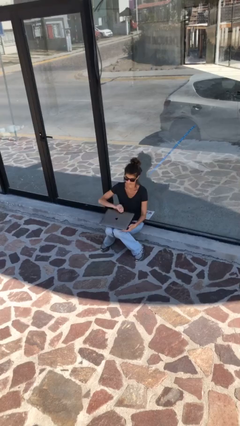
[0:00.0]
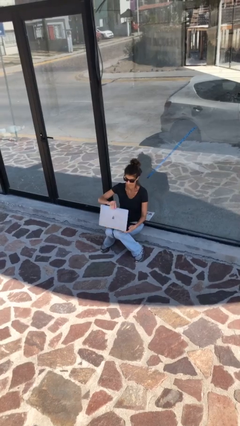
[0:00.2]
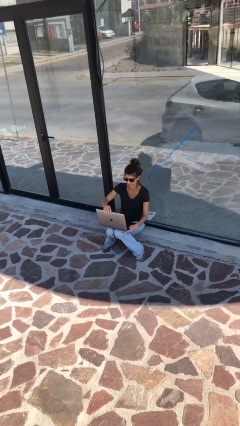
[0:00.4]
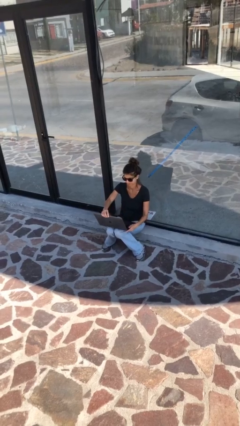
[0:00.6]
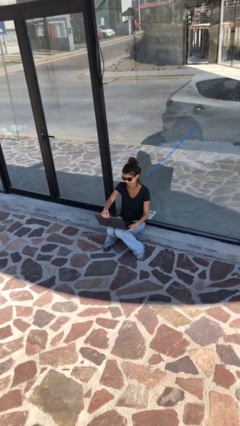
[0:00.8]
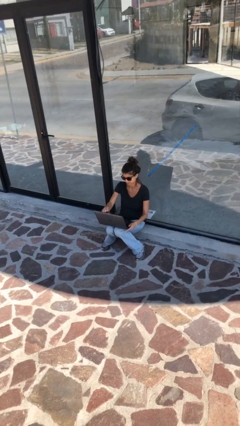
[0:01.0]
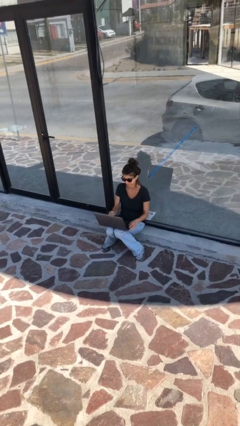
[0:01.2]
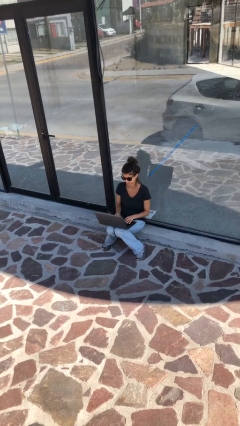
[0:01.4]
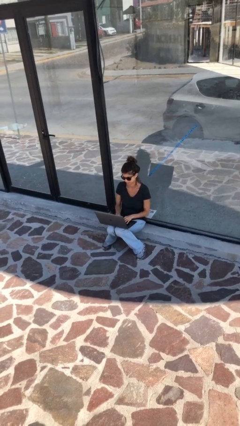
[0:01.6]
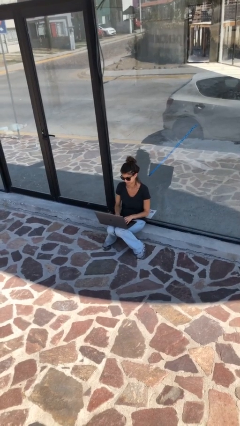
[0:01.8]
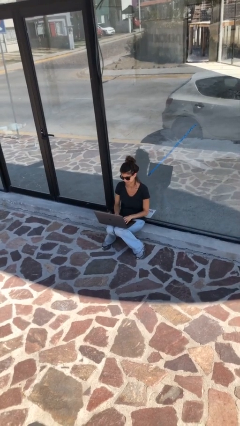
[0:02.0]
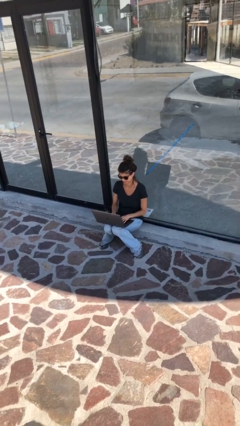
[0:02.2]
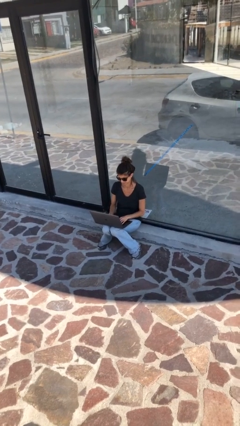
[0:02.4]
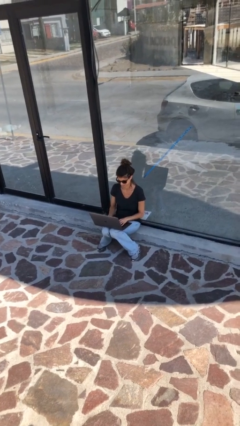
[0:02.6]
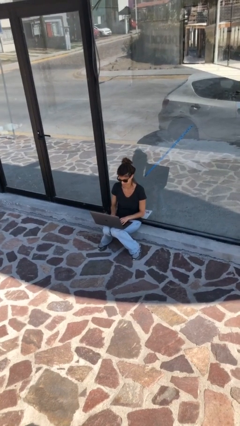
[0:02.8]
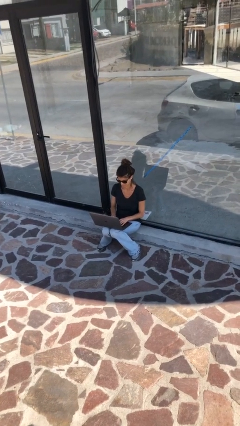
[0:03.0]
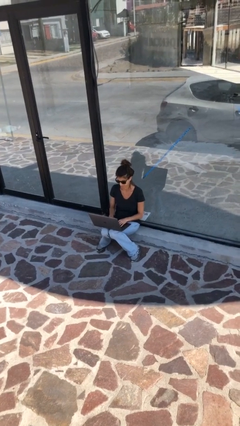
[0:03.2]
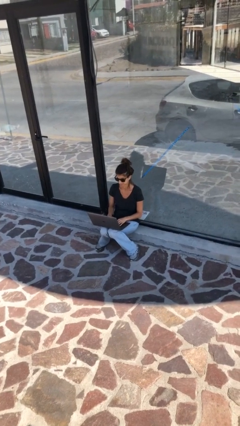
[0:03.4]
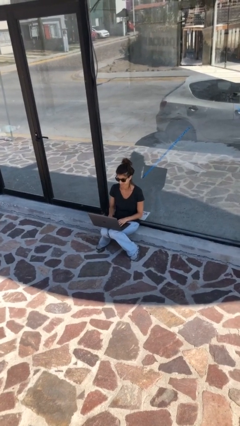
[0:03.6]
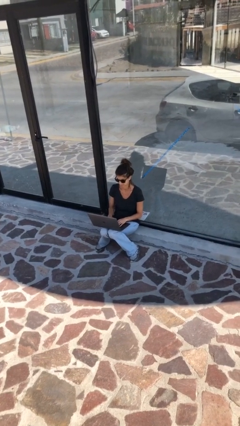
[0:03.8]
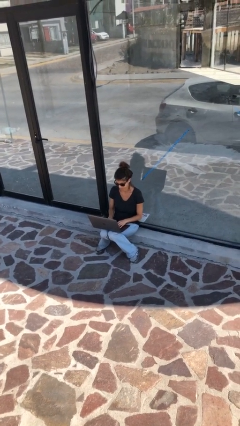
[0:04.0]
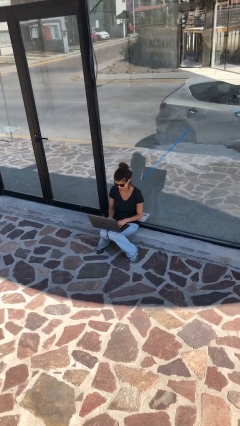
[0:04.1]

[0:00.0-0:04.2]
person interacts with laptop

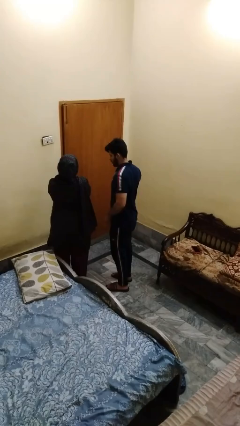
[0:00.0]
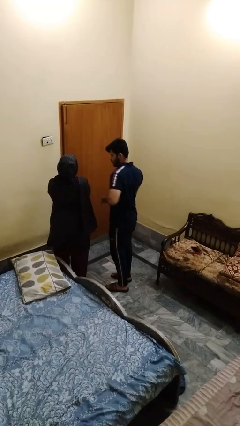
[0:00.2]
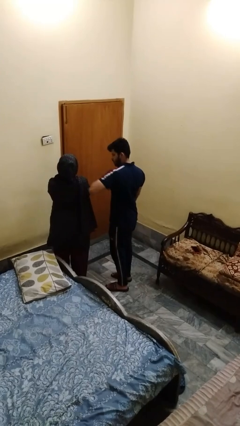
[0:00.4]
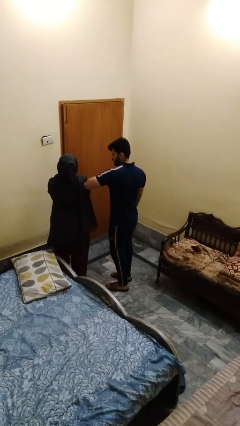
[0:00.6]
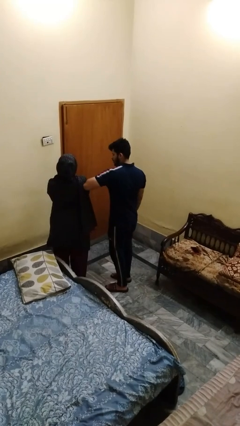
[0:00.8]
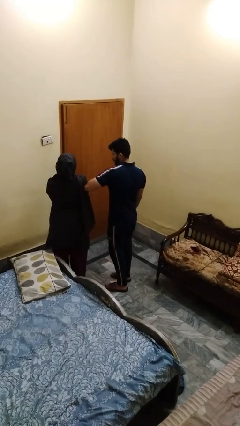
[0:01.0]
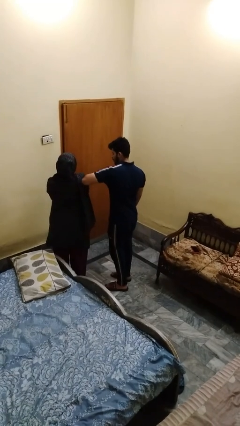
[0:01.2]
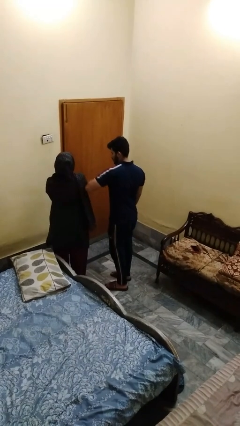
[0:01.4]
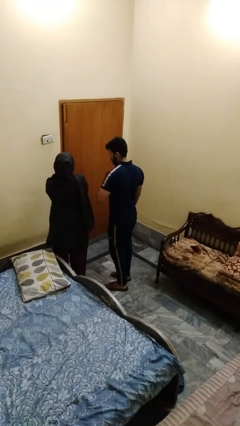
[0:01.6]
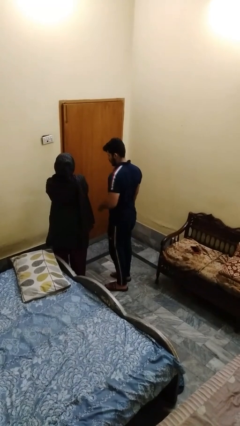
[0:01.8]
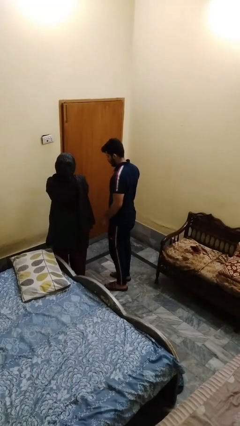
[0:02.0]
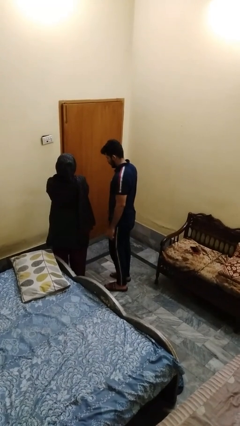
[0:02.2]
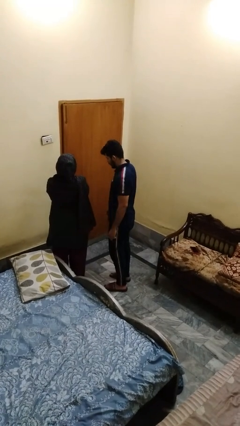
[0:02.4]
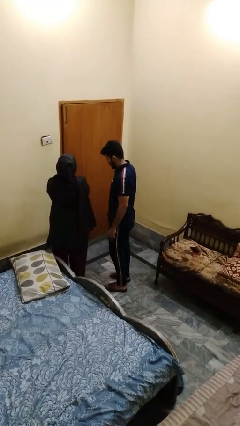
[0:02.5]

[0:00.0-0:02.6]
person nudges person with elbow

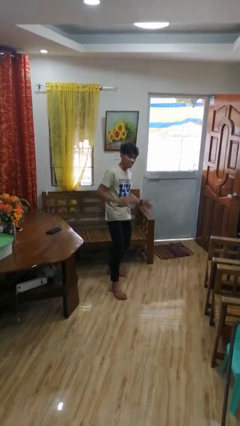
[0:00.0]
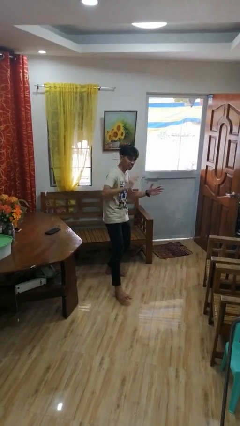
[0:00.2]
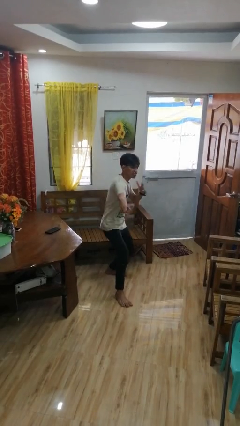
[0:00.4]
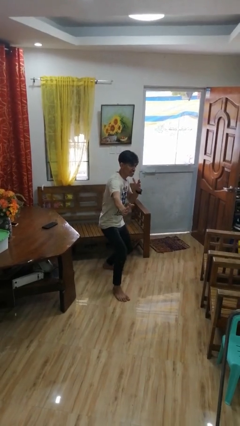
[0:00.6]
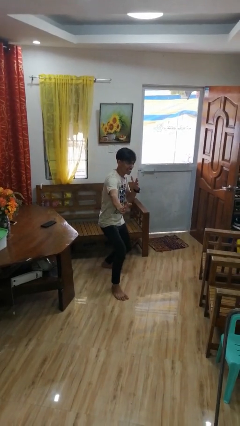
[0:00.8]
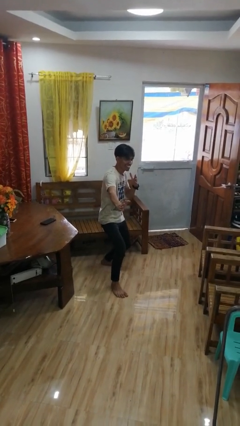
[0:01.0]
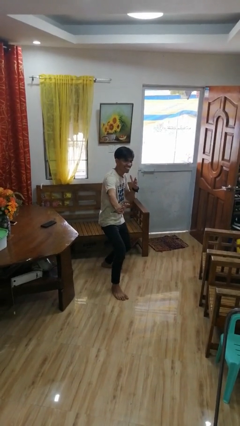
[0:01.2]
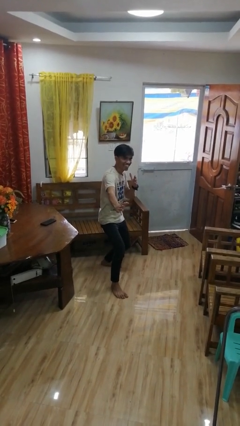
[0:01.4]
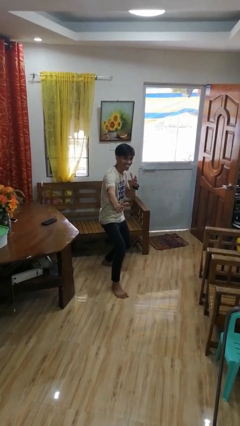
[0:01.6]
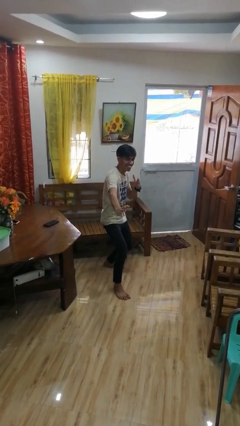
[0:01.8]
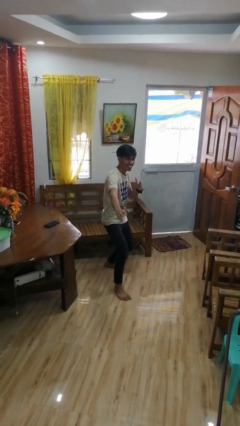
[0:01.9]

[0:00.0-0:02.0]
person karate chop

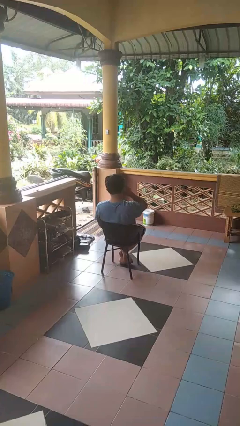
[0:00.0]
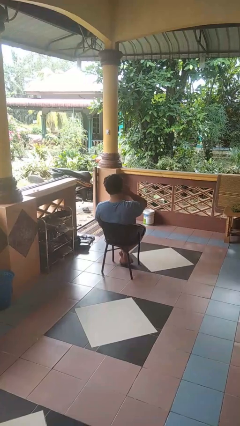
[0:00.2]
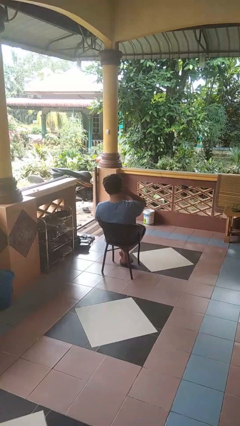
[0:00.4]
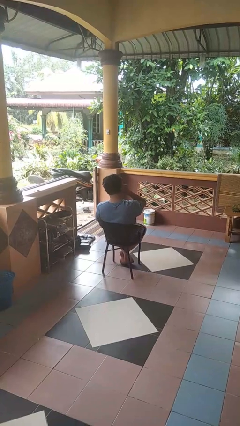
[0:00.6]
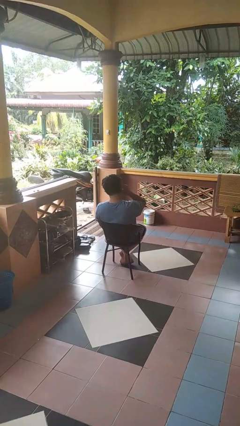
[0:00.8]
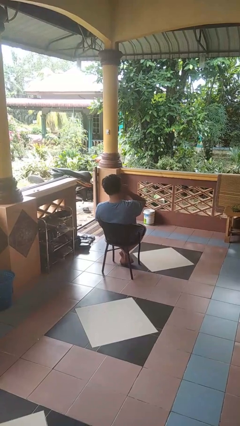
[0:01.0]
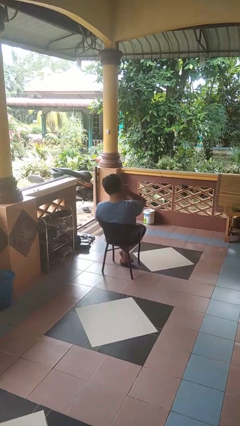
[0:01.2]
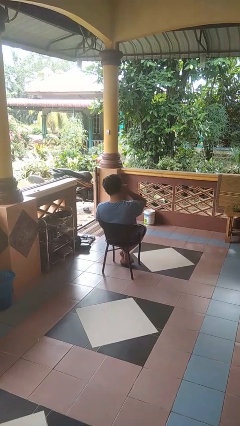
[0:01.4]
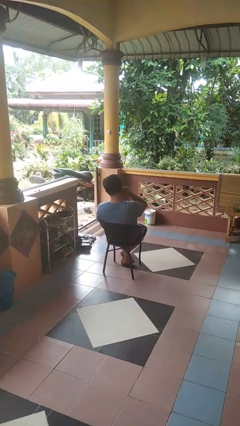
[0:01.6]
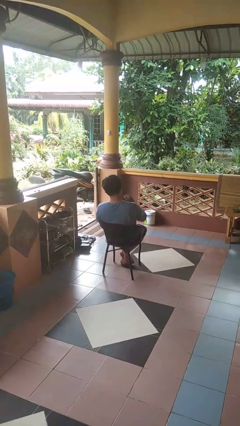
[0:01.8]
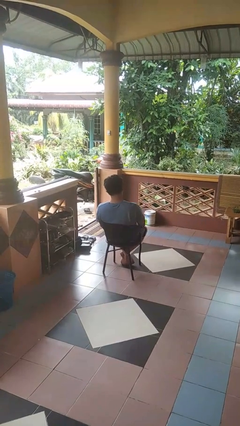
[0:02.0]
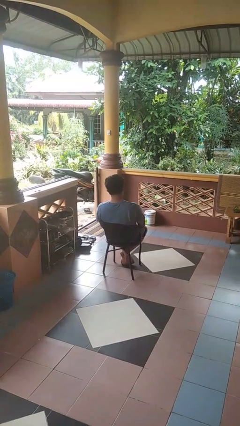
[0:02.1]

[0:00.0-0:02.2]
person touches earlobe

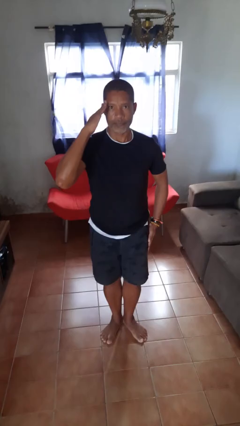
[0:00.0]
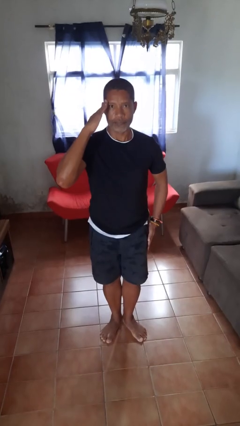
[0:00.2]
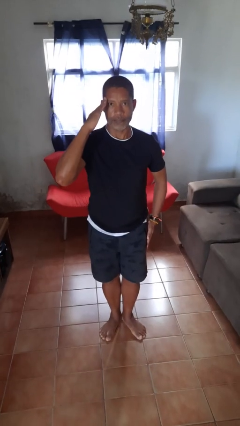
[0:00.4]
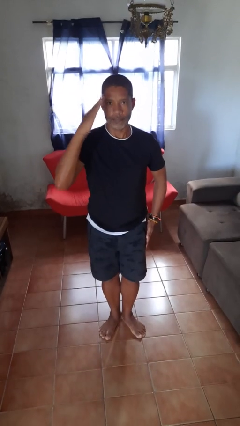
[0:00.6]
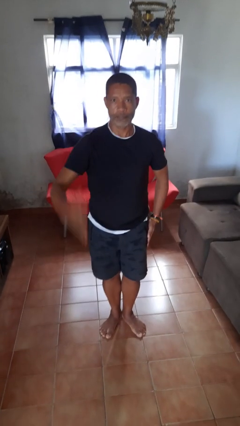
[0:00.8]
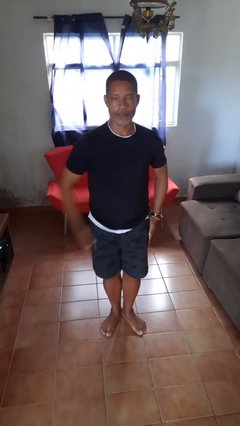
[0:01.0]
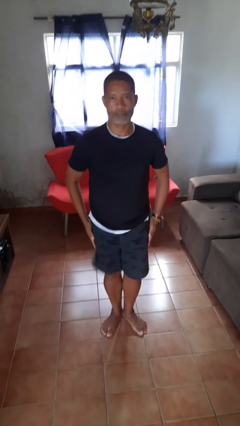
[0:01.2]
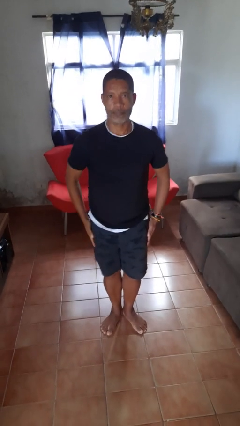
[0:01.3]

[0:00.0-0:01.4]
person salutes

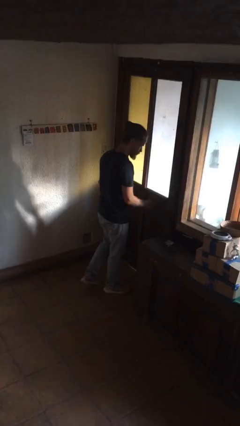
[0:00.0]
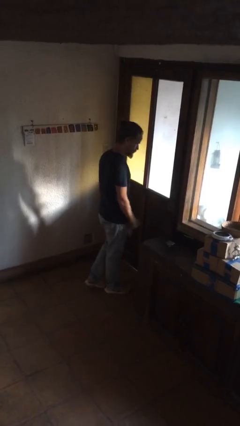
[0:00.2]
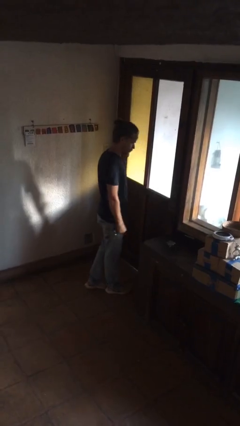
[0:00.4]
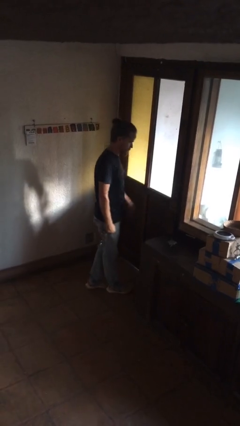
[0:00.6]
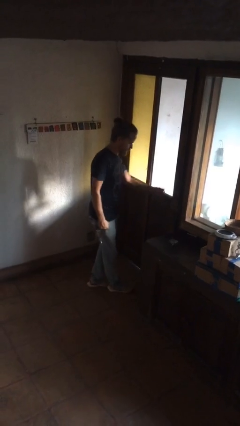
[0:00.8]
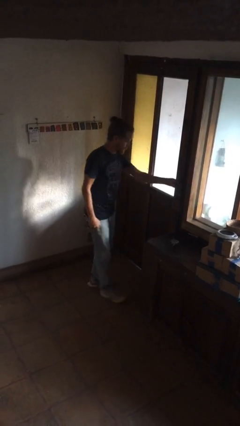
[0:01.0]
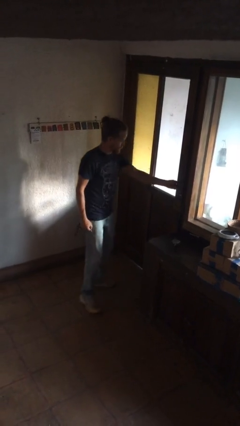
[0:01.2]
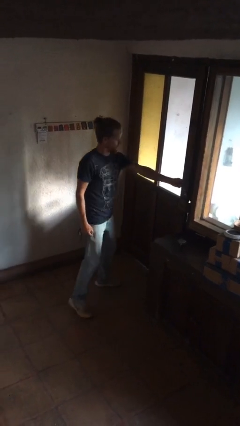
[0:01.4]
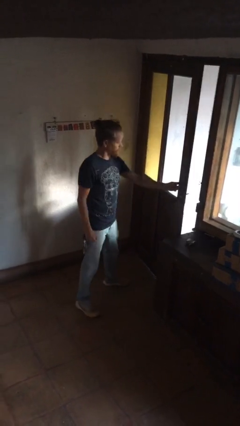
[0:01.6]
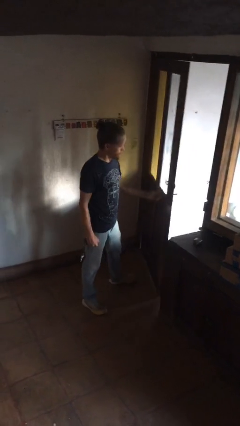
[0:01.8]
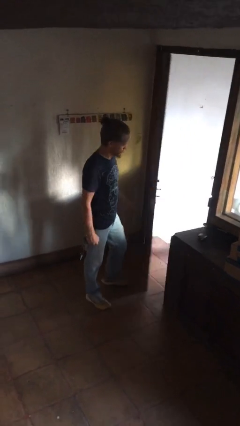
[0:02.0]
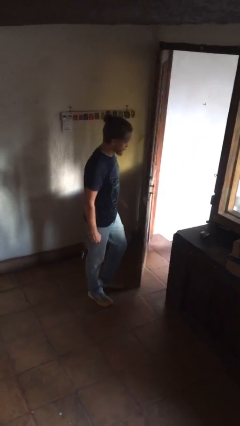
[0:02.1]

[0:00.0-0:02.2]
person opens facility door

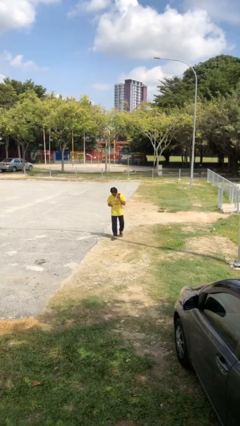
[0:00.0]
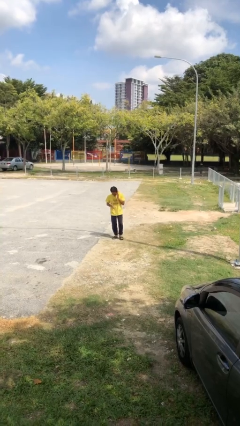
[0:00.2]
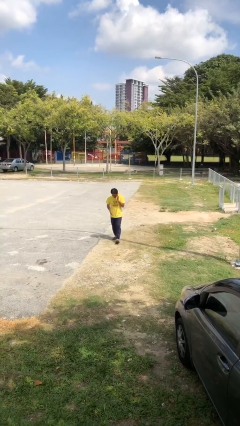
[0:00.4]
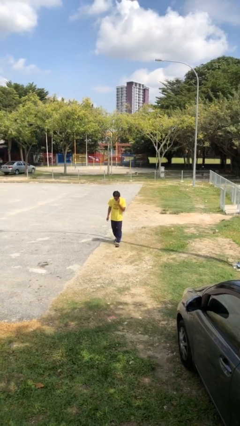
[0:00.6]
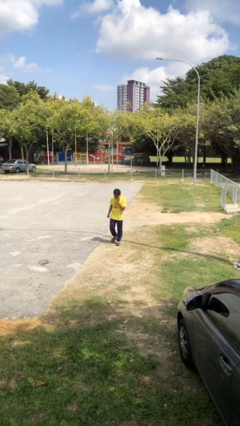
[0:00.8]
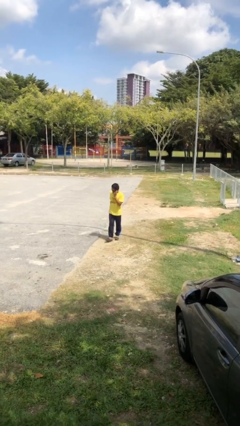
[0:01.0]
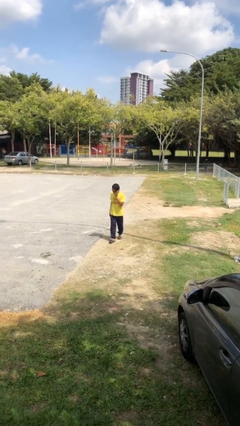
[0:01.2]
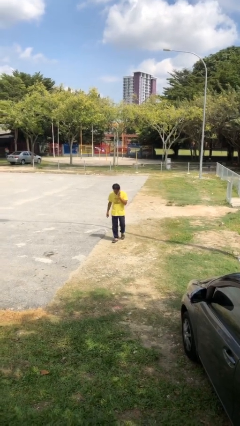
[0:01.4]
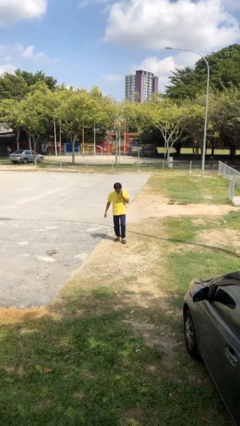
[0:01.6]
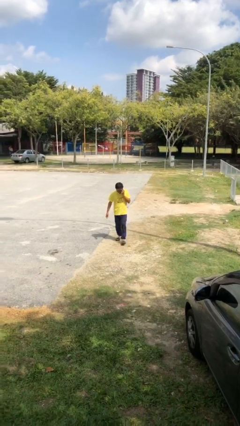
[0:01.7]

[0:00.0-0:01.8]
person talks on phone

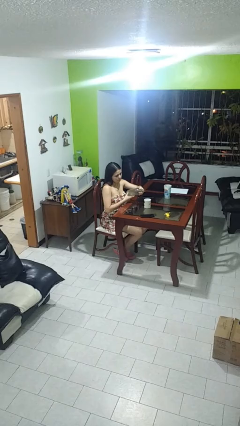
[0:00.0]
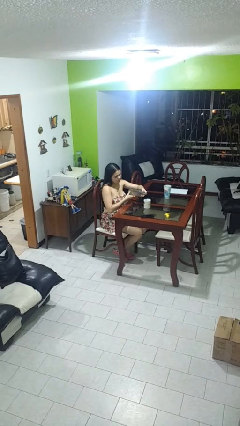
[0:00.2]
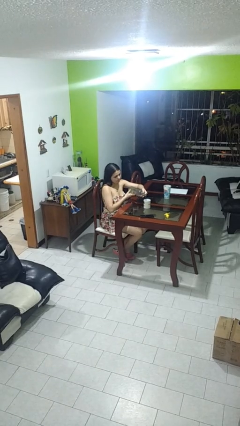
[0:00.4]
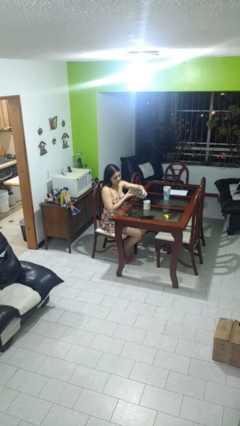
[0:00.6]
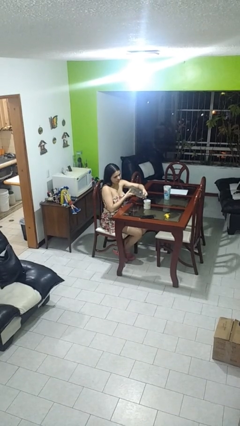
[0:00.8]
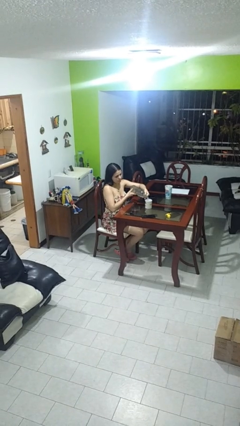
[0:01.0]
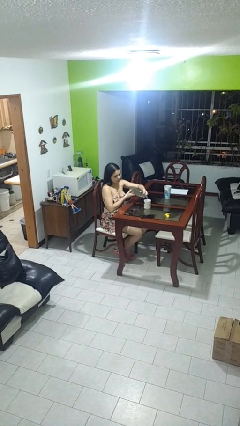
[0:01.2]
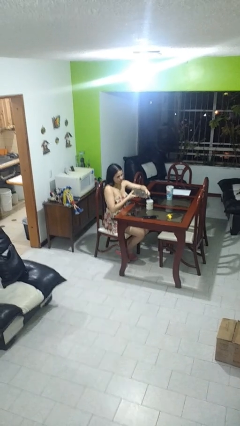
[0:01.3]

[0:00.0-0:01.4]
person pours liquid into cup
